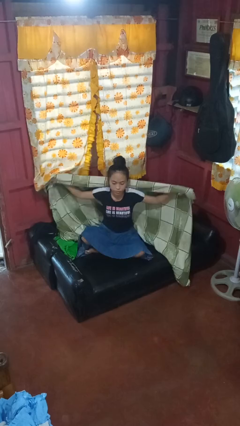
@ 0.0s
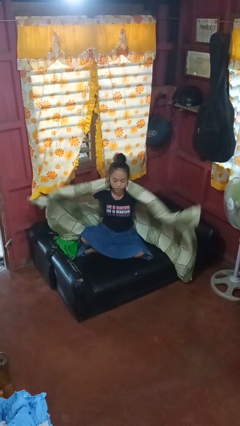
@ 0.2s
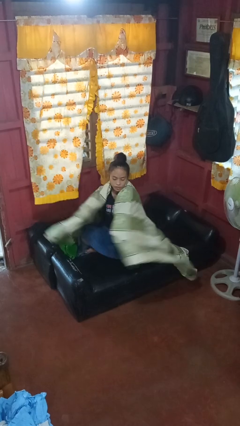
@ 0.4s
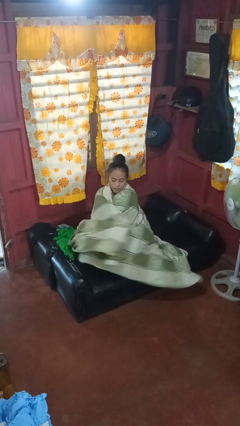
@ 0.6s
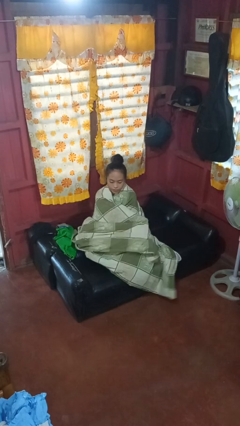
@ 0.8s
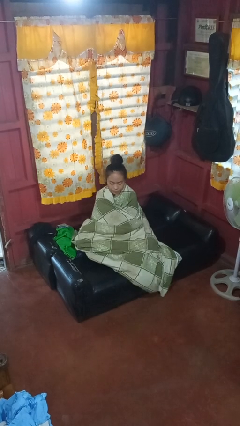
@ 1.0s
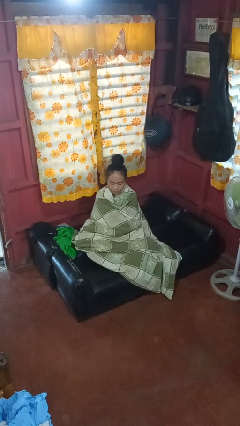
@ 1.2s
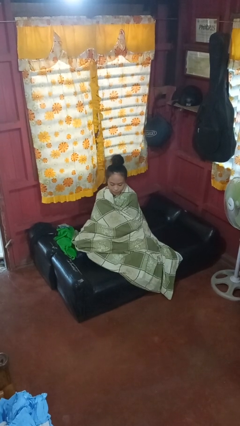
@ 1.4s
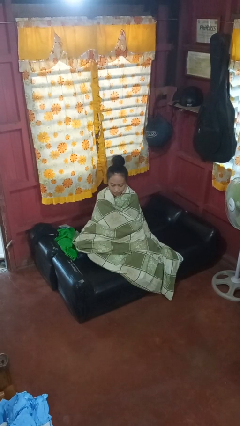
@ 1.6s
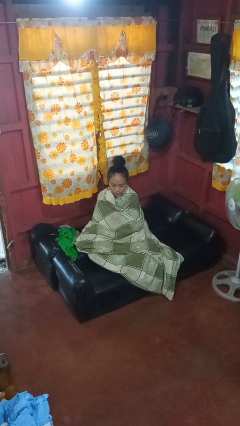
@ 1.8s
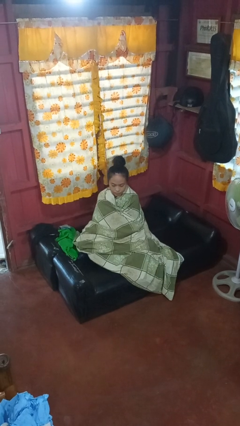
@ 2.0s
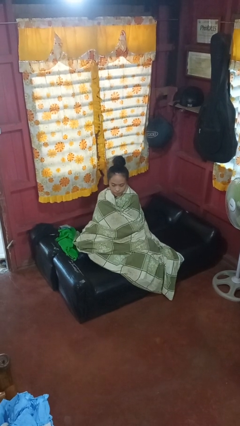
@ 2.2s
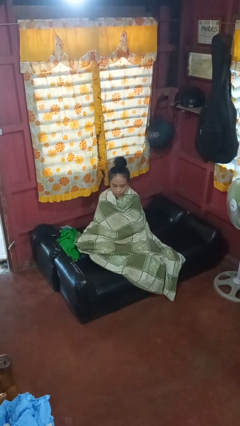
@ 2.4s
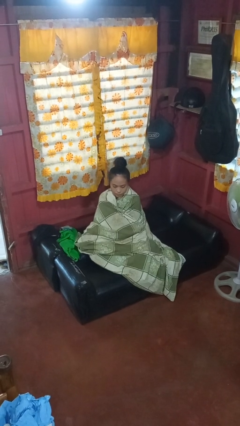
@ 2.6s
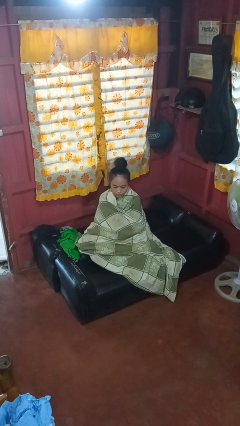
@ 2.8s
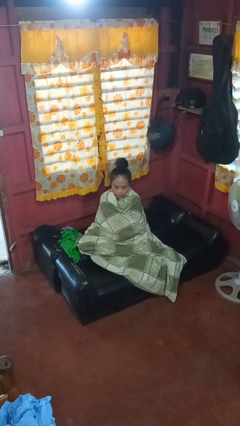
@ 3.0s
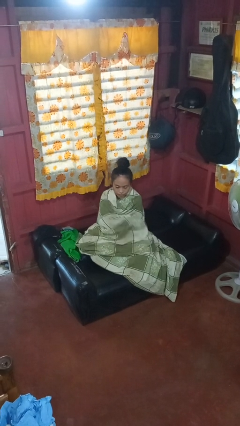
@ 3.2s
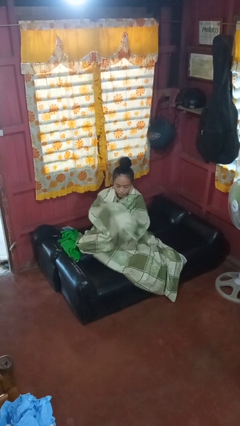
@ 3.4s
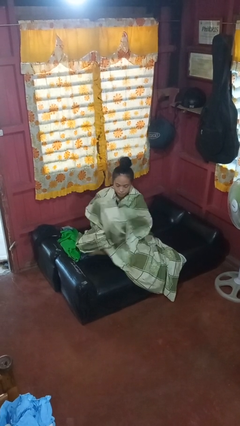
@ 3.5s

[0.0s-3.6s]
person covers with blanket

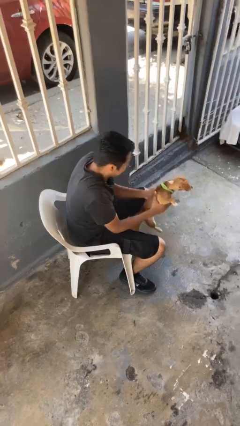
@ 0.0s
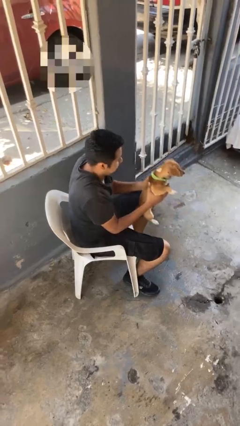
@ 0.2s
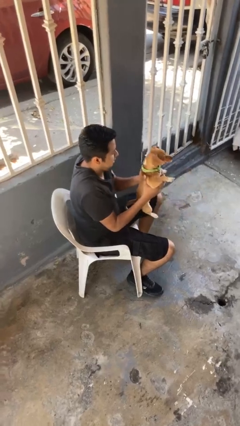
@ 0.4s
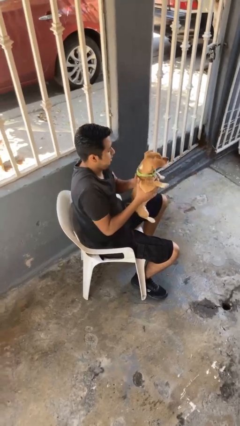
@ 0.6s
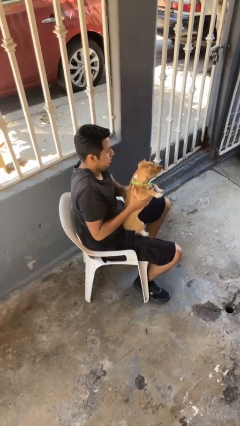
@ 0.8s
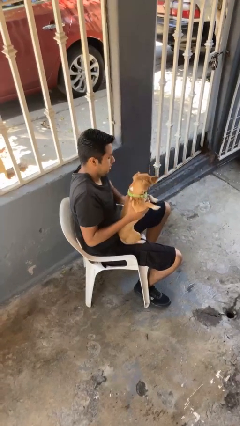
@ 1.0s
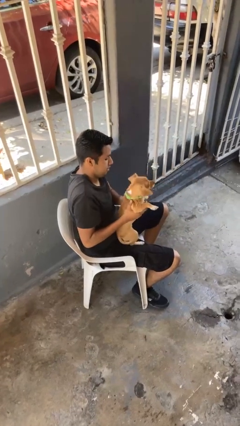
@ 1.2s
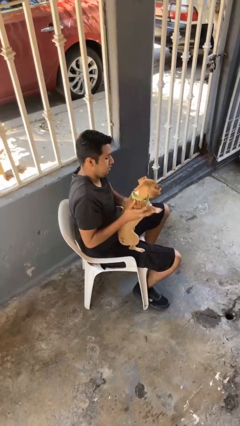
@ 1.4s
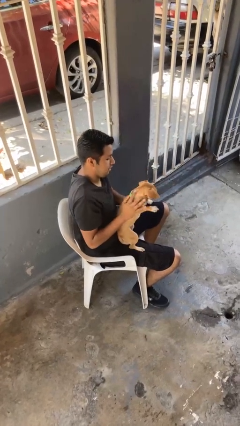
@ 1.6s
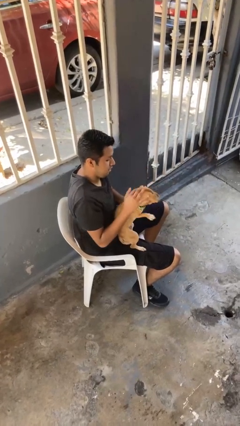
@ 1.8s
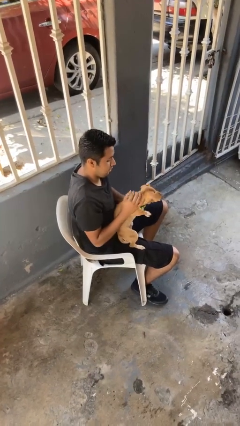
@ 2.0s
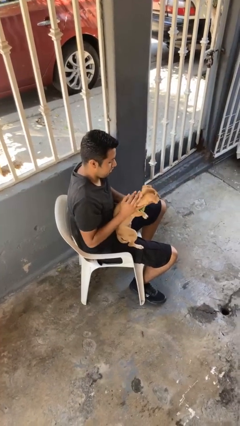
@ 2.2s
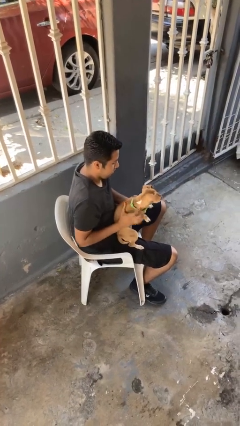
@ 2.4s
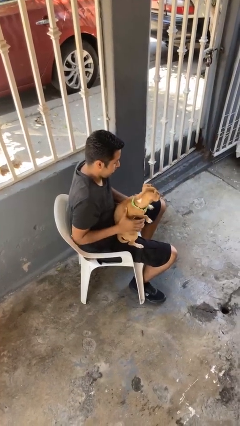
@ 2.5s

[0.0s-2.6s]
person hugs dog

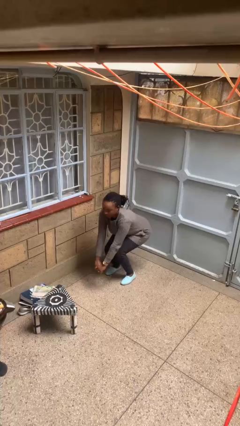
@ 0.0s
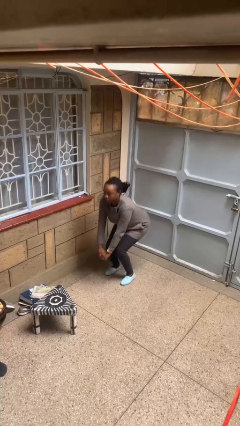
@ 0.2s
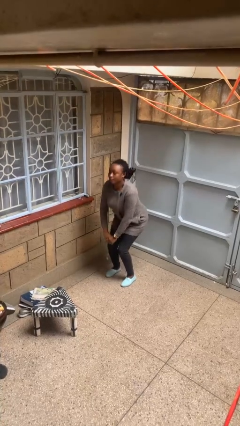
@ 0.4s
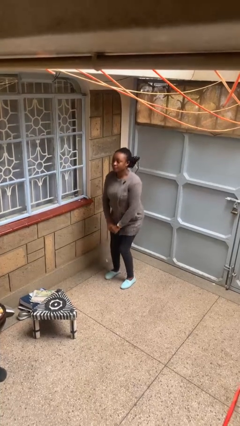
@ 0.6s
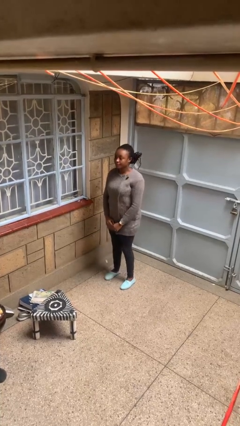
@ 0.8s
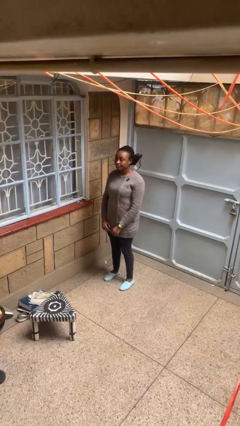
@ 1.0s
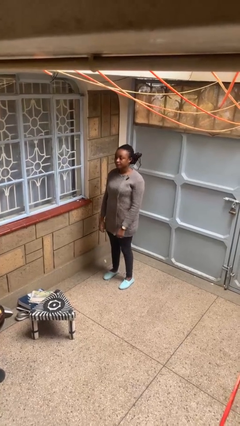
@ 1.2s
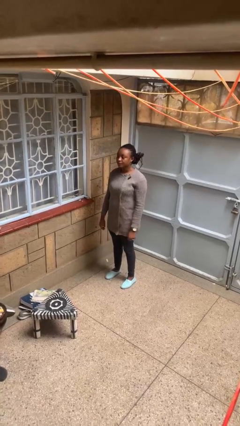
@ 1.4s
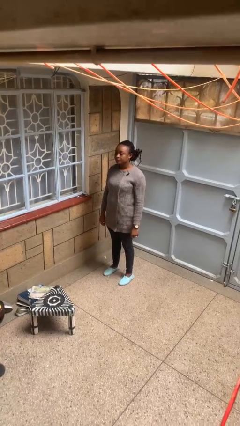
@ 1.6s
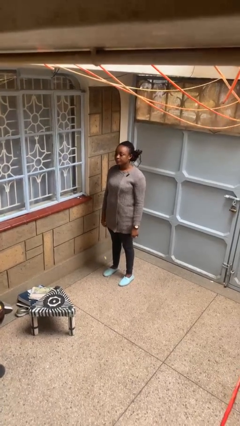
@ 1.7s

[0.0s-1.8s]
person stands up

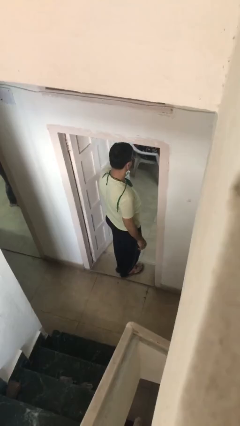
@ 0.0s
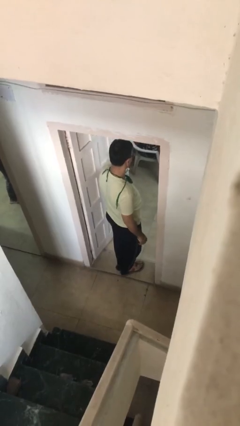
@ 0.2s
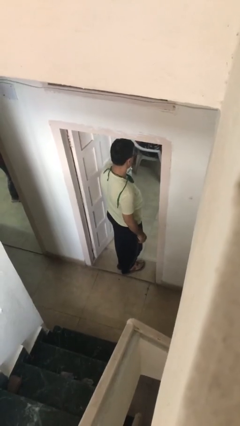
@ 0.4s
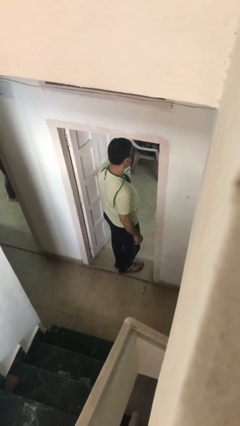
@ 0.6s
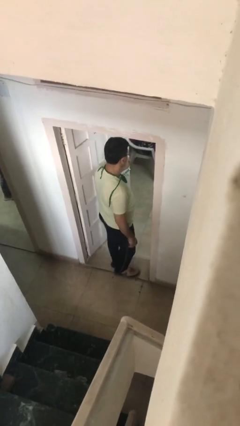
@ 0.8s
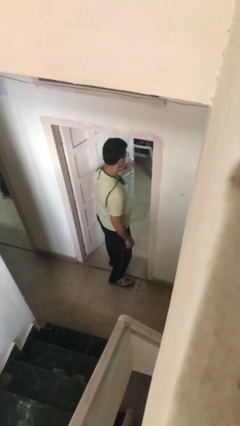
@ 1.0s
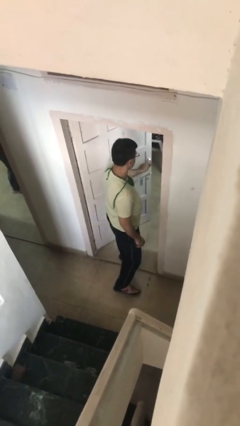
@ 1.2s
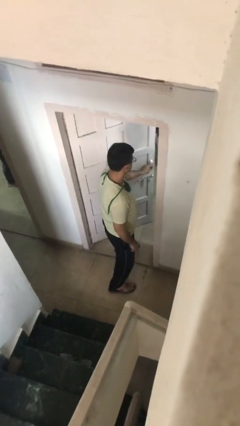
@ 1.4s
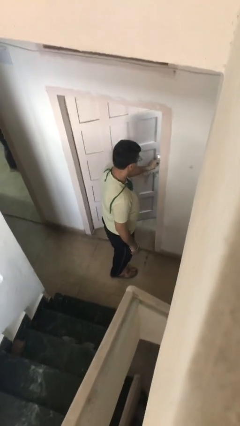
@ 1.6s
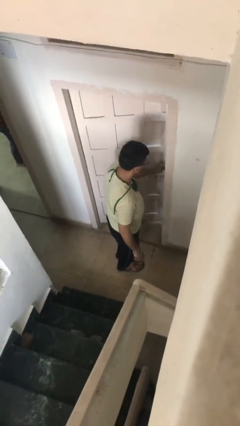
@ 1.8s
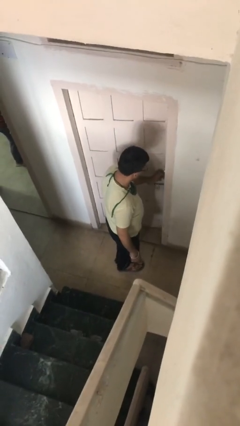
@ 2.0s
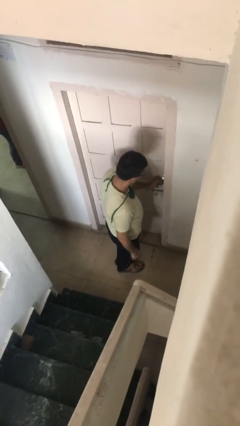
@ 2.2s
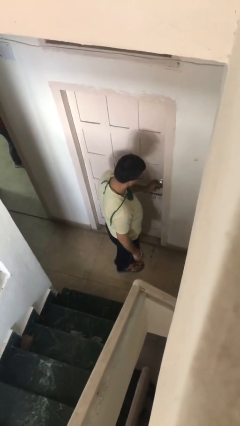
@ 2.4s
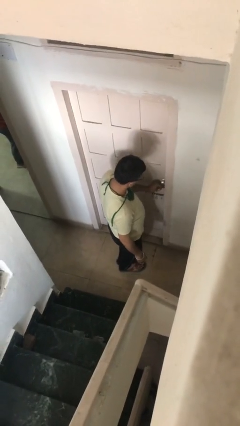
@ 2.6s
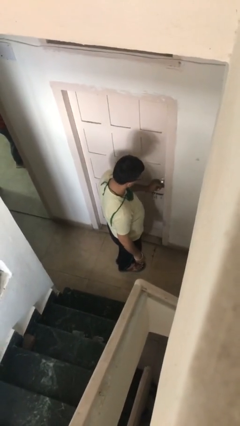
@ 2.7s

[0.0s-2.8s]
person closes facility door

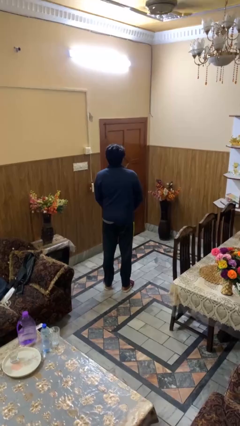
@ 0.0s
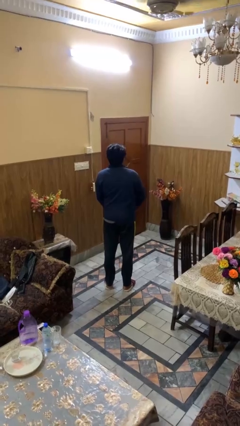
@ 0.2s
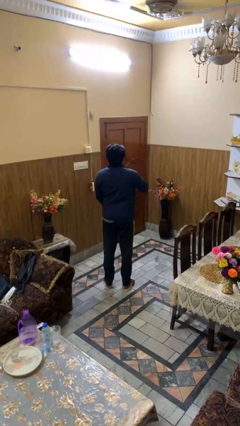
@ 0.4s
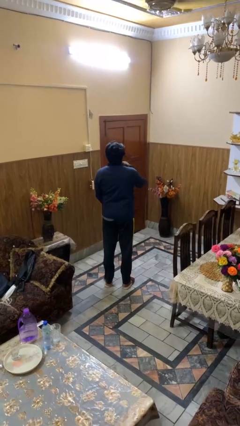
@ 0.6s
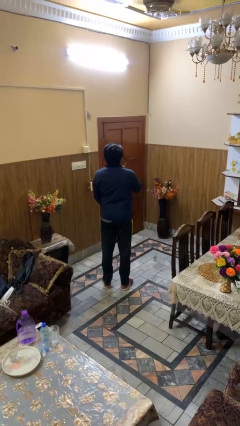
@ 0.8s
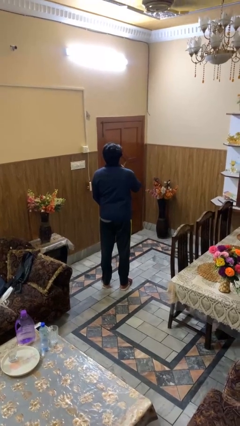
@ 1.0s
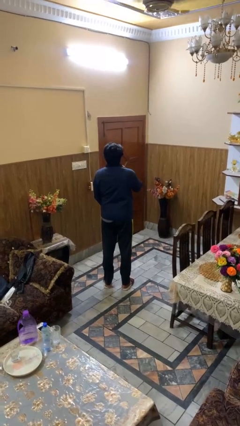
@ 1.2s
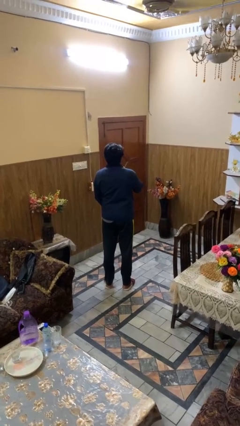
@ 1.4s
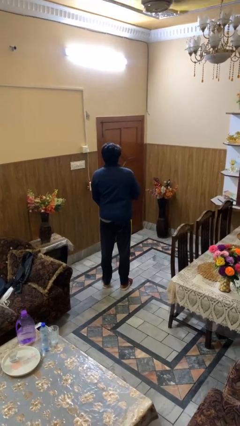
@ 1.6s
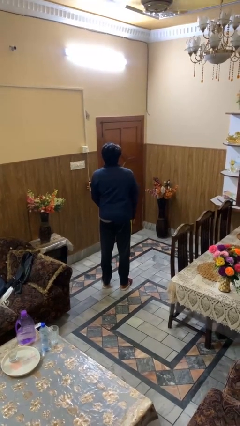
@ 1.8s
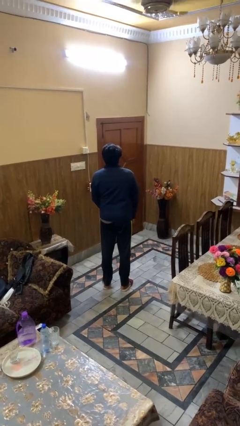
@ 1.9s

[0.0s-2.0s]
person zips up jacket

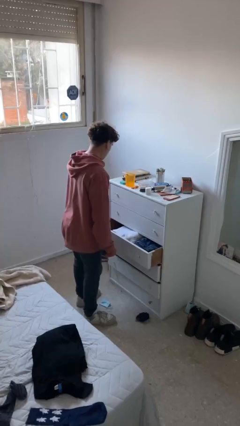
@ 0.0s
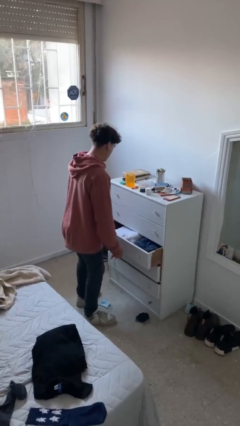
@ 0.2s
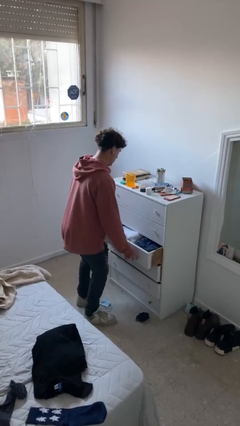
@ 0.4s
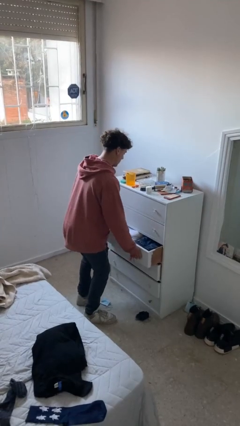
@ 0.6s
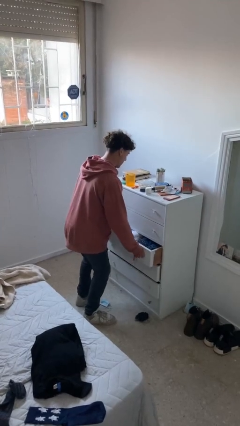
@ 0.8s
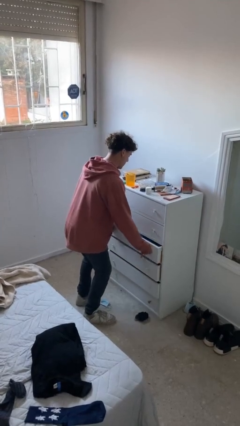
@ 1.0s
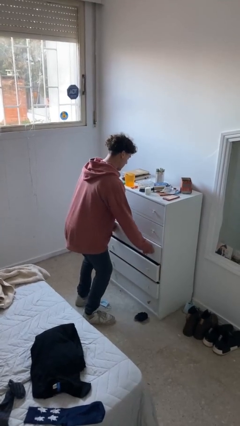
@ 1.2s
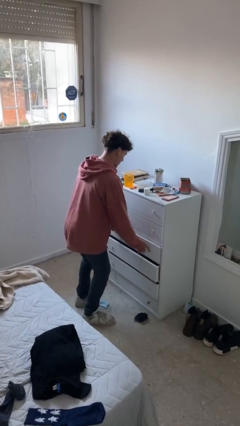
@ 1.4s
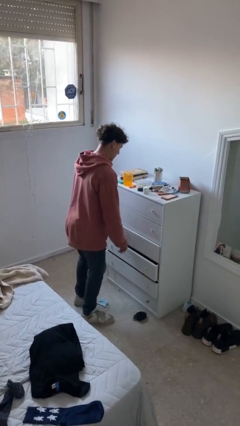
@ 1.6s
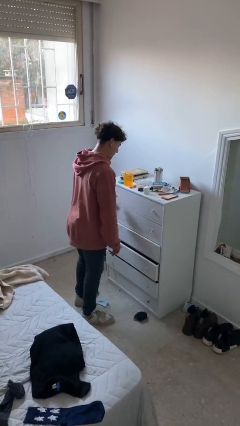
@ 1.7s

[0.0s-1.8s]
person closes dresser drawer

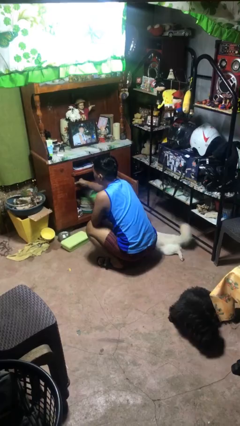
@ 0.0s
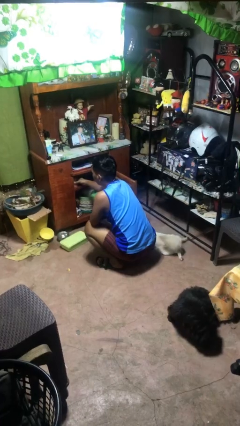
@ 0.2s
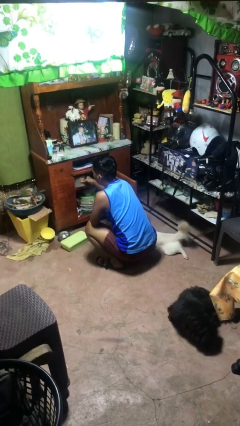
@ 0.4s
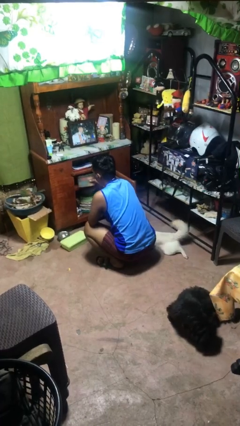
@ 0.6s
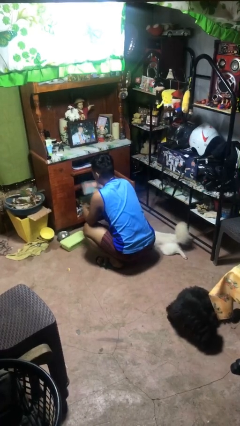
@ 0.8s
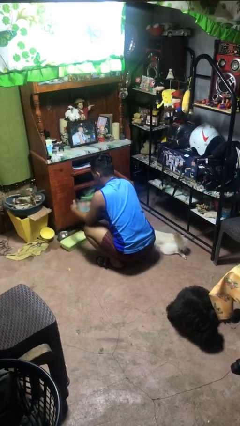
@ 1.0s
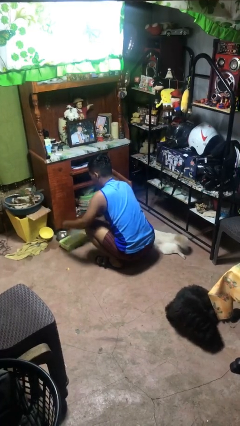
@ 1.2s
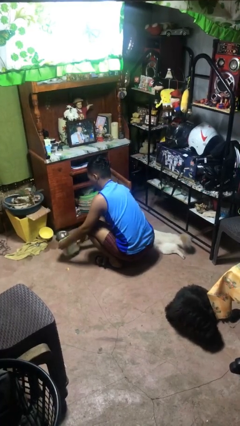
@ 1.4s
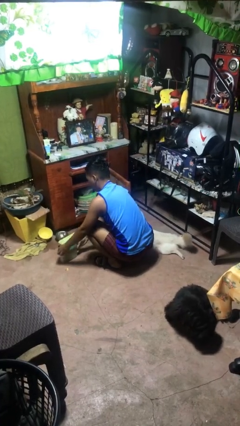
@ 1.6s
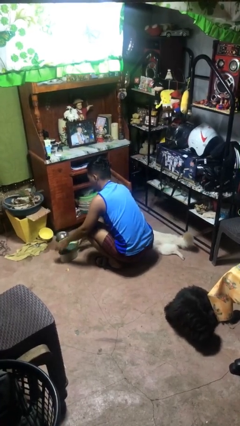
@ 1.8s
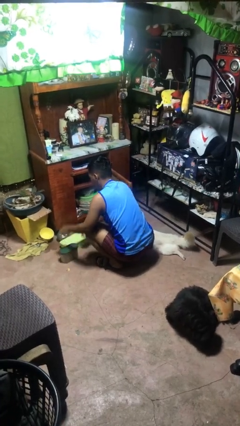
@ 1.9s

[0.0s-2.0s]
person takes object from cabinet

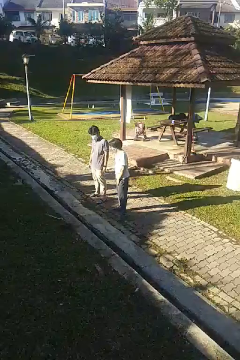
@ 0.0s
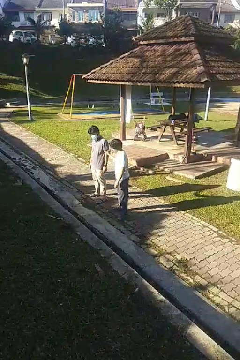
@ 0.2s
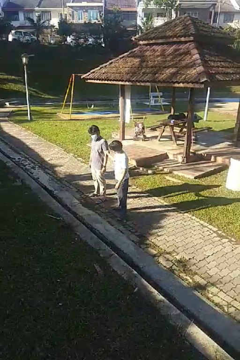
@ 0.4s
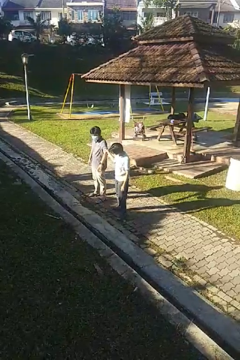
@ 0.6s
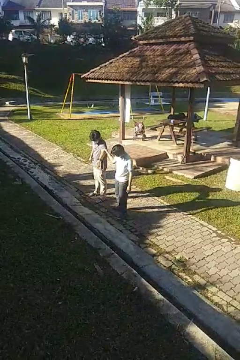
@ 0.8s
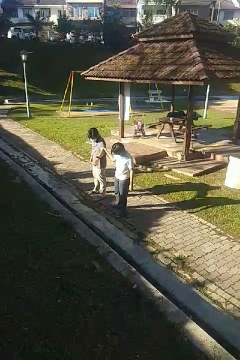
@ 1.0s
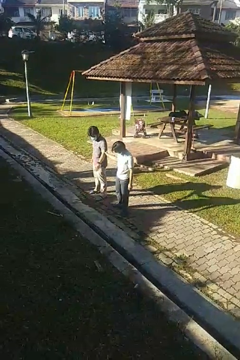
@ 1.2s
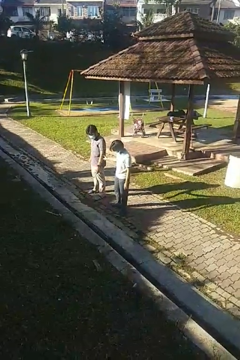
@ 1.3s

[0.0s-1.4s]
person grabs person by bicep
